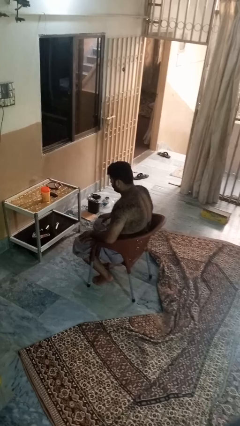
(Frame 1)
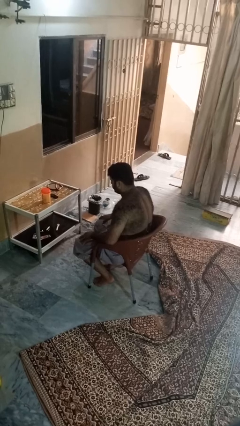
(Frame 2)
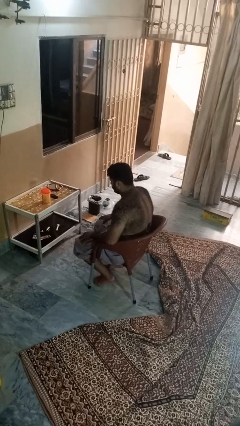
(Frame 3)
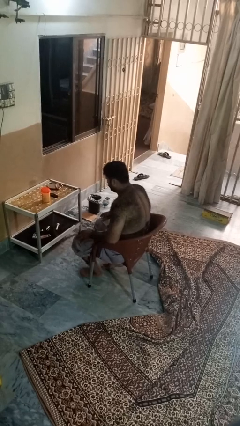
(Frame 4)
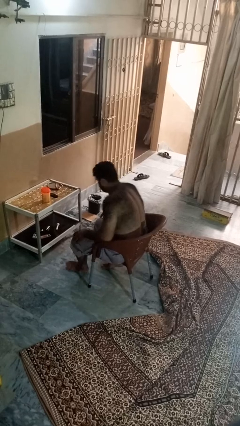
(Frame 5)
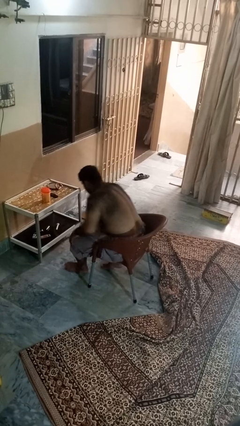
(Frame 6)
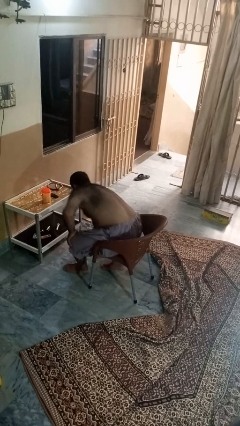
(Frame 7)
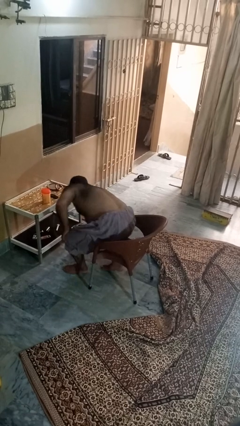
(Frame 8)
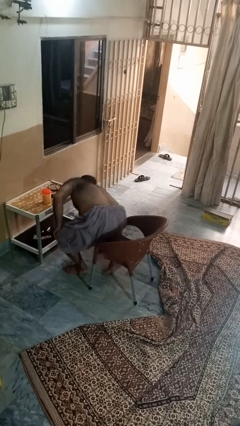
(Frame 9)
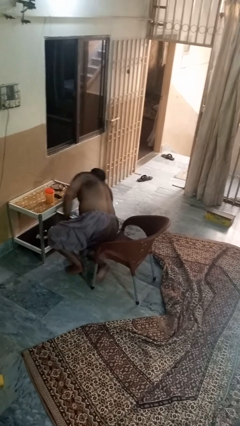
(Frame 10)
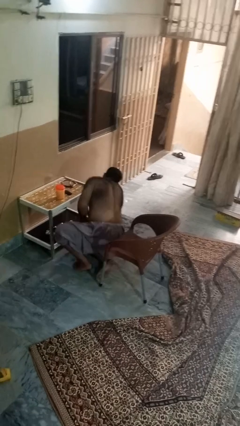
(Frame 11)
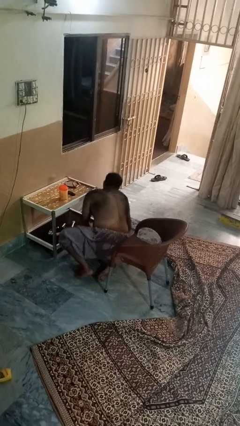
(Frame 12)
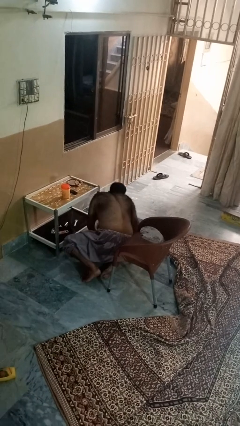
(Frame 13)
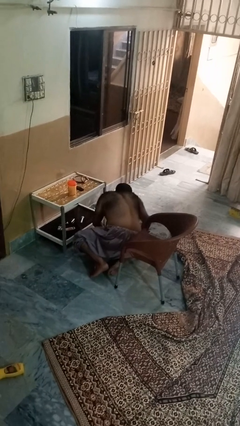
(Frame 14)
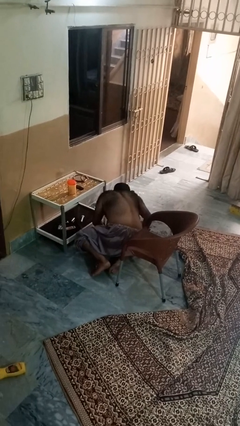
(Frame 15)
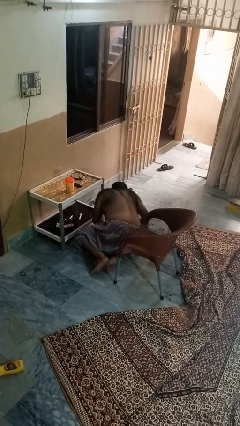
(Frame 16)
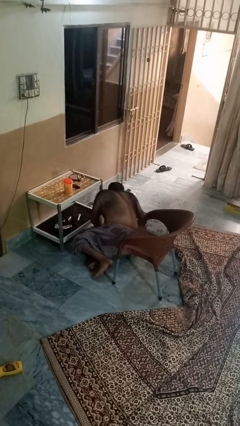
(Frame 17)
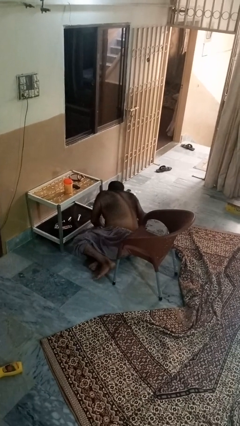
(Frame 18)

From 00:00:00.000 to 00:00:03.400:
person falls from chair

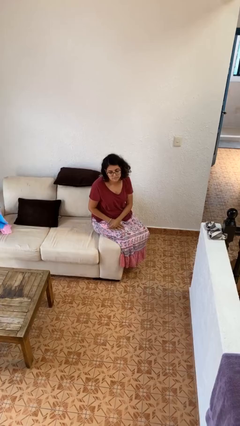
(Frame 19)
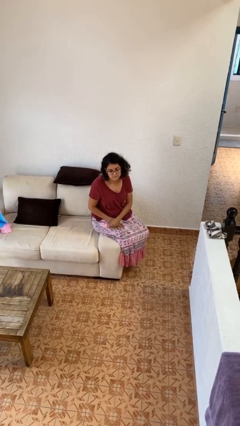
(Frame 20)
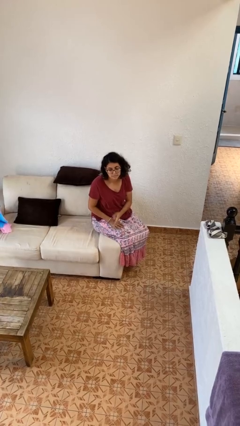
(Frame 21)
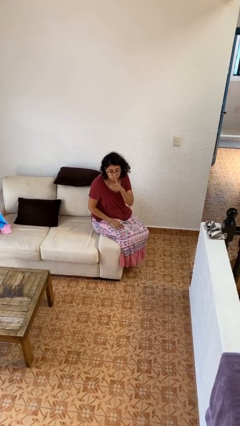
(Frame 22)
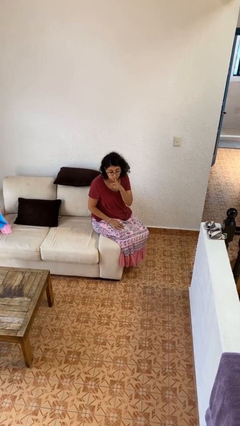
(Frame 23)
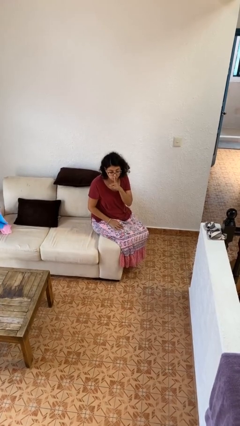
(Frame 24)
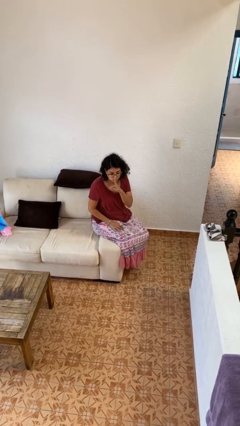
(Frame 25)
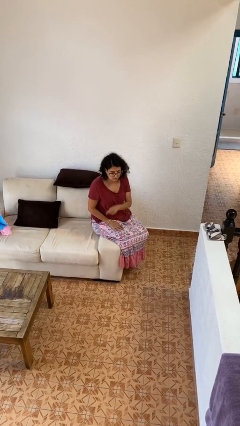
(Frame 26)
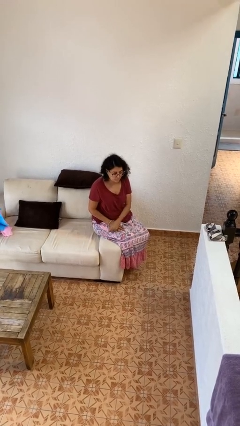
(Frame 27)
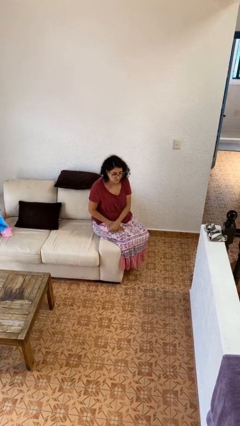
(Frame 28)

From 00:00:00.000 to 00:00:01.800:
person gestures be quiet

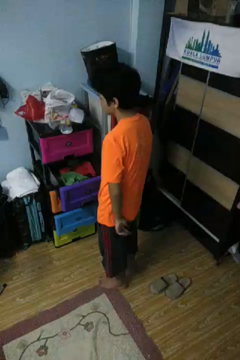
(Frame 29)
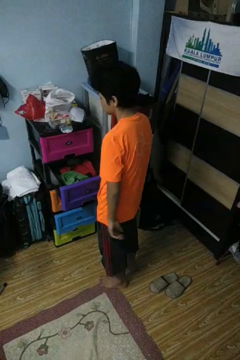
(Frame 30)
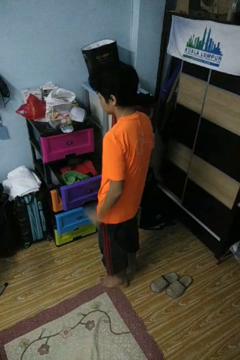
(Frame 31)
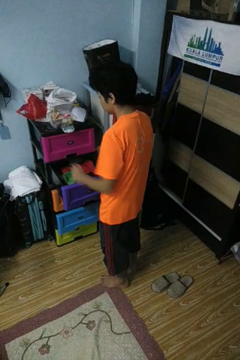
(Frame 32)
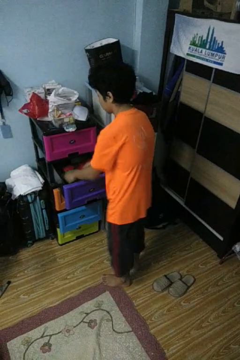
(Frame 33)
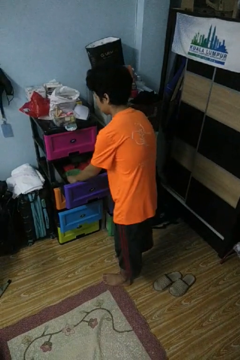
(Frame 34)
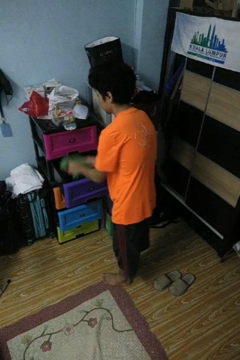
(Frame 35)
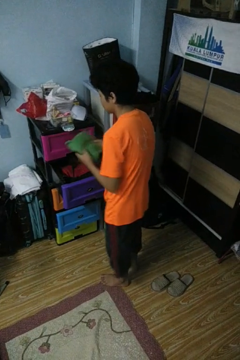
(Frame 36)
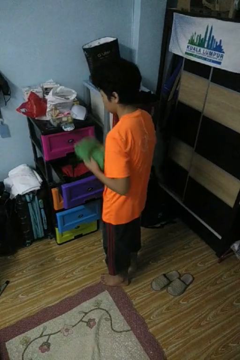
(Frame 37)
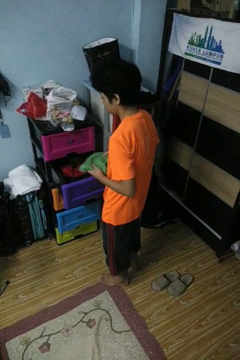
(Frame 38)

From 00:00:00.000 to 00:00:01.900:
person takes clothes from dresser

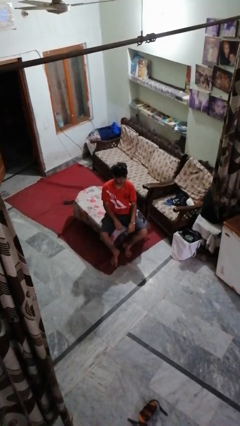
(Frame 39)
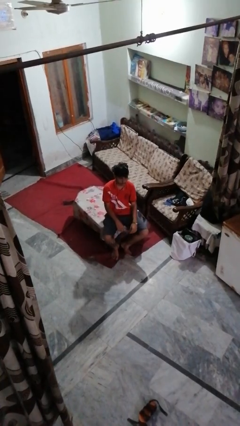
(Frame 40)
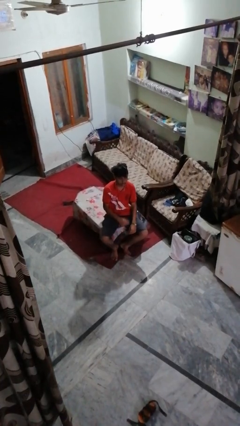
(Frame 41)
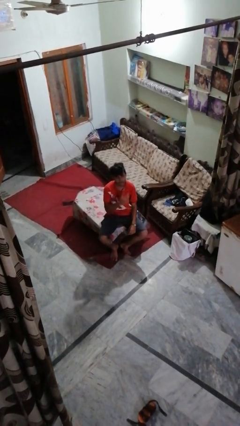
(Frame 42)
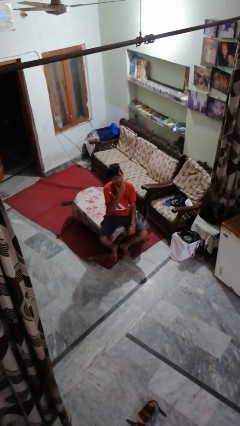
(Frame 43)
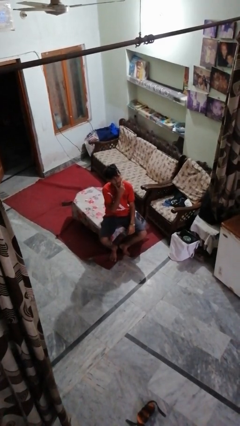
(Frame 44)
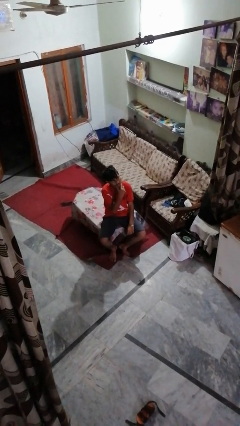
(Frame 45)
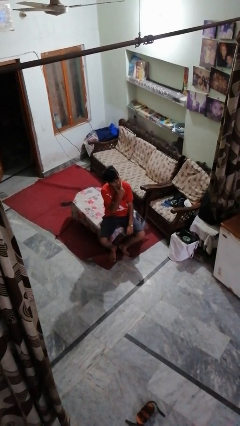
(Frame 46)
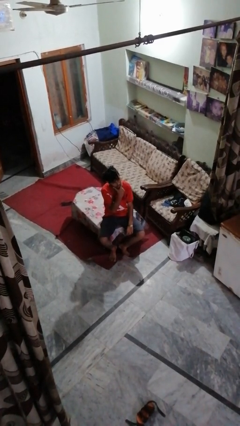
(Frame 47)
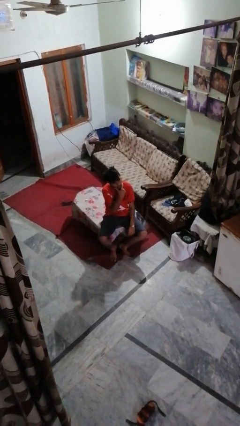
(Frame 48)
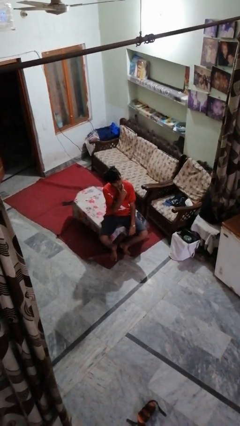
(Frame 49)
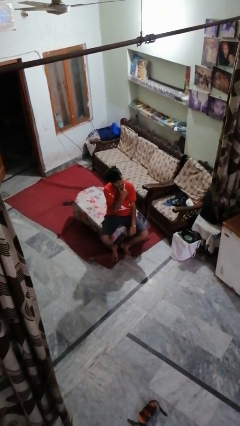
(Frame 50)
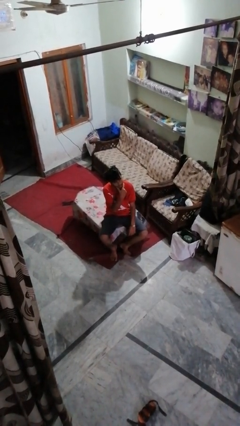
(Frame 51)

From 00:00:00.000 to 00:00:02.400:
person strokes chin

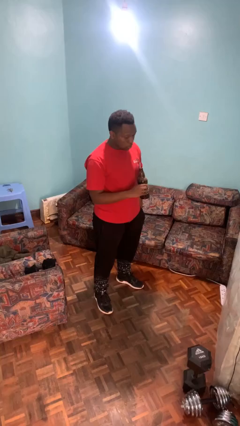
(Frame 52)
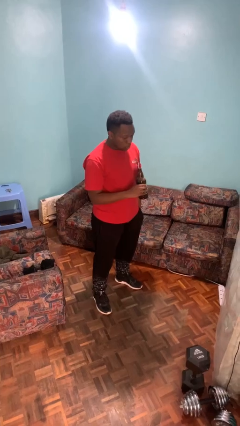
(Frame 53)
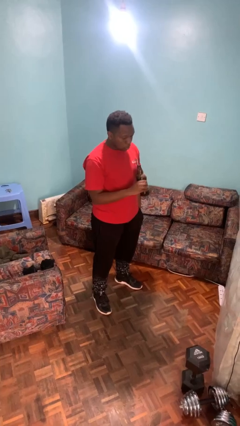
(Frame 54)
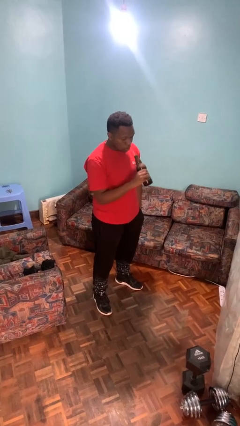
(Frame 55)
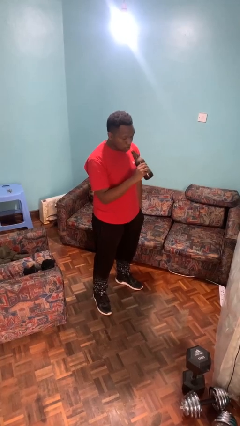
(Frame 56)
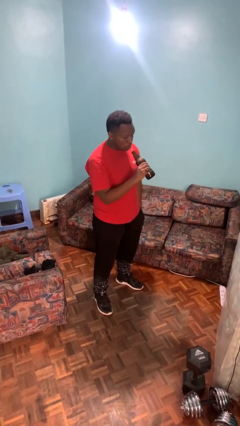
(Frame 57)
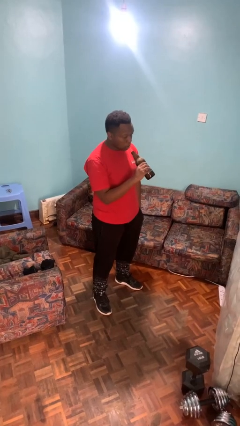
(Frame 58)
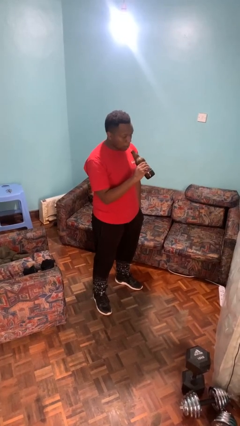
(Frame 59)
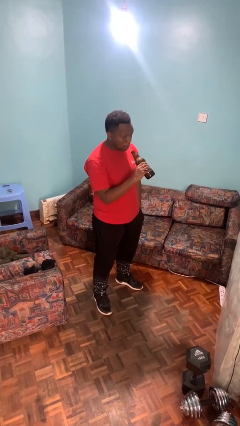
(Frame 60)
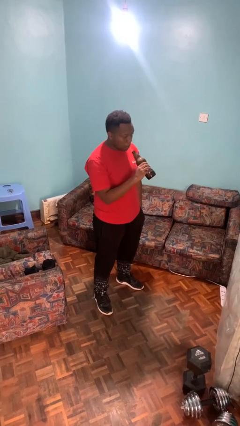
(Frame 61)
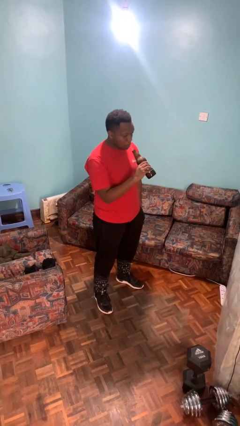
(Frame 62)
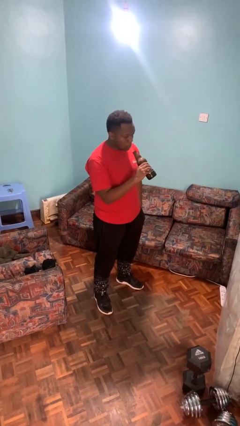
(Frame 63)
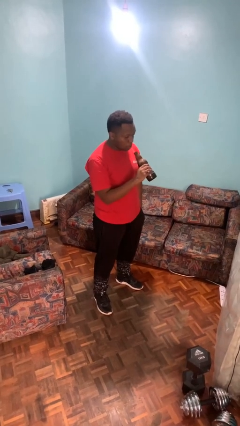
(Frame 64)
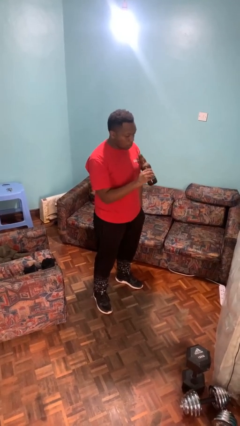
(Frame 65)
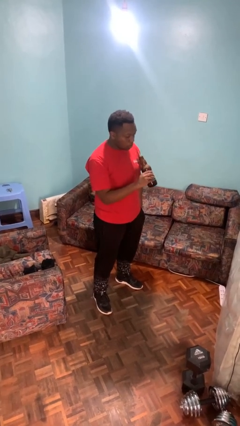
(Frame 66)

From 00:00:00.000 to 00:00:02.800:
person drinks from straw

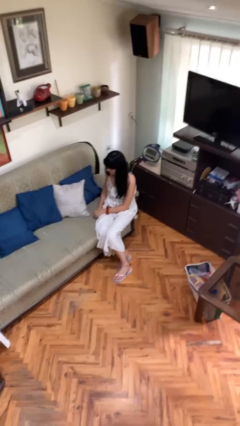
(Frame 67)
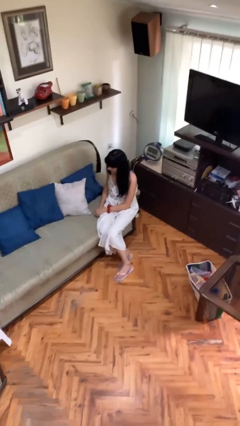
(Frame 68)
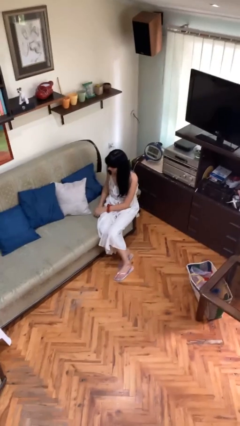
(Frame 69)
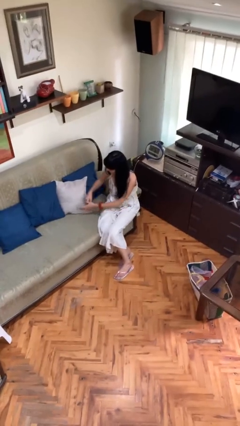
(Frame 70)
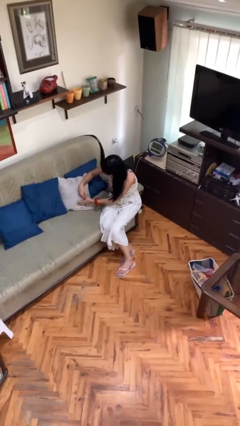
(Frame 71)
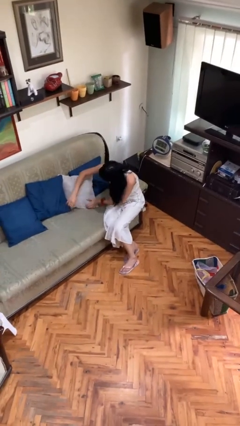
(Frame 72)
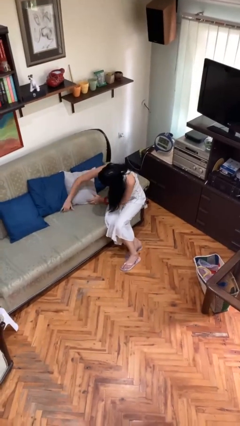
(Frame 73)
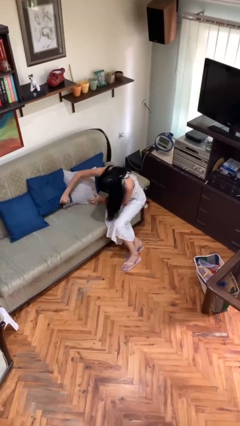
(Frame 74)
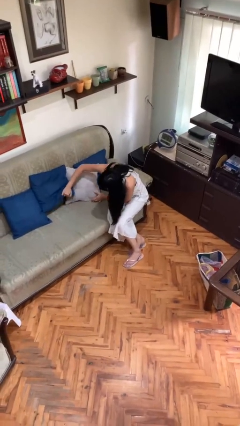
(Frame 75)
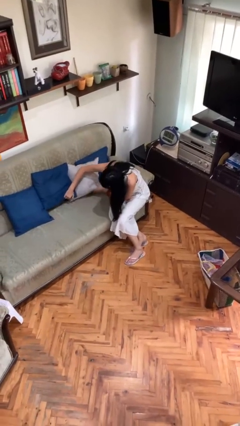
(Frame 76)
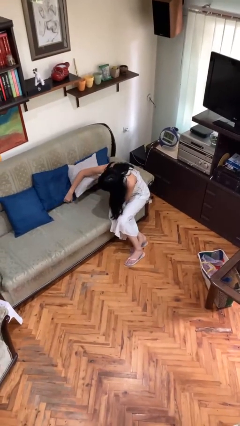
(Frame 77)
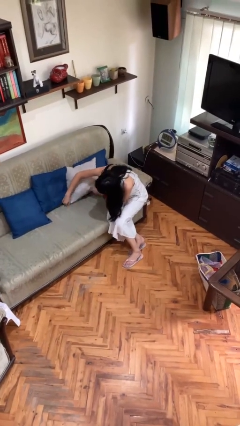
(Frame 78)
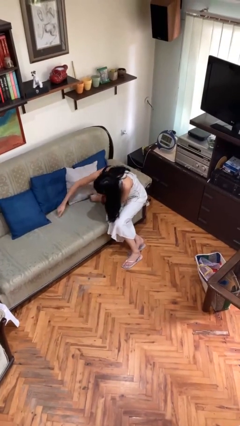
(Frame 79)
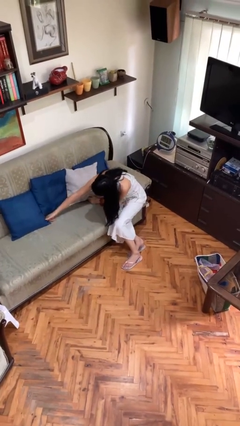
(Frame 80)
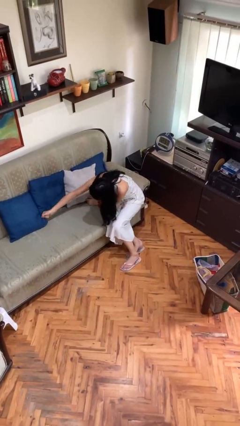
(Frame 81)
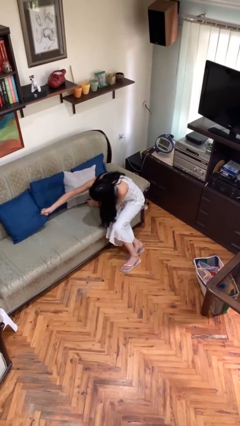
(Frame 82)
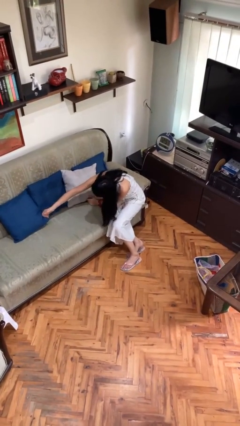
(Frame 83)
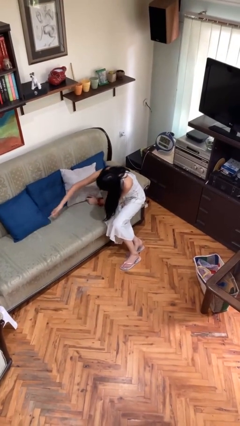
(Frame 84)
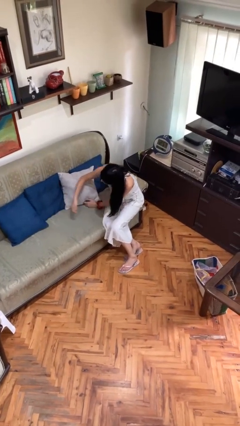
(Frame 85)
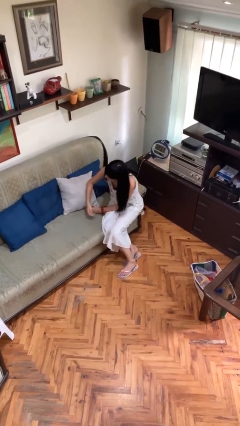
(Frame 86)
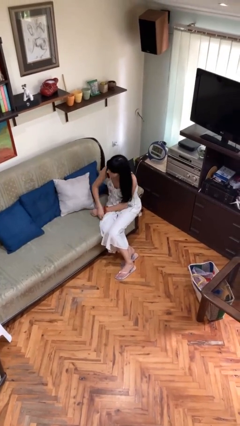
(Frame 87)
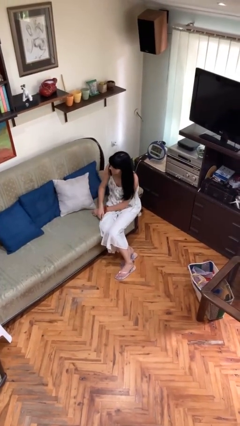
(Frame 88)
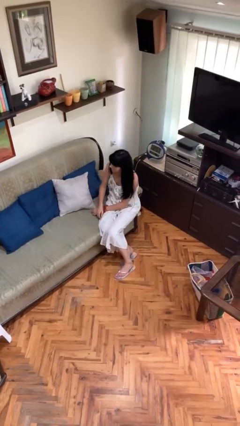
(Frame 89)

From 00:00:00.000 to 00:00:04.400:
person searches in couch

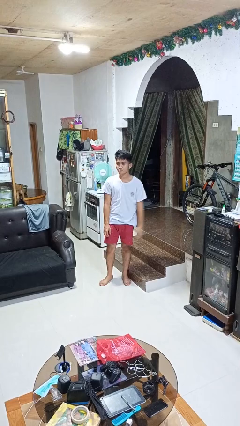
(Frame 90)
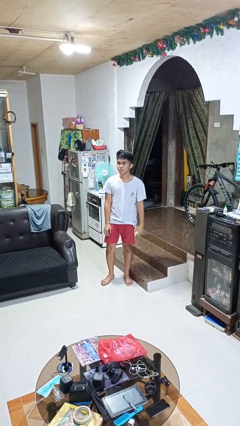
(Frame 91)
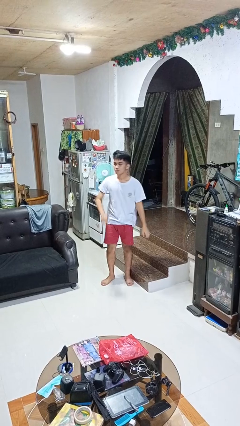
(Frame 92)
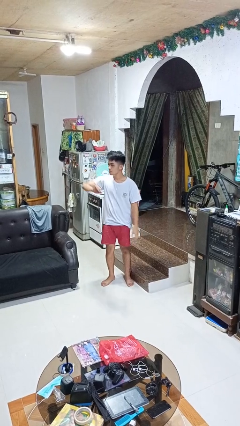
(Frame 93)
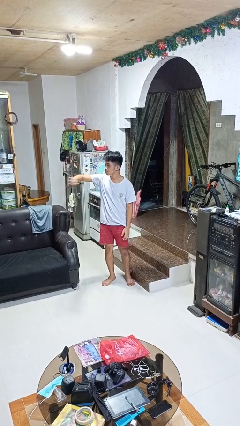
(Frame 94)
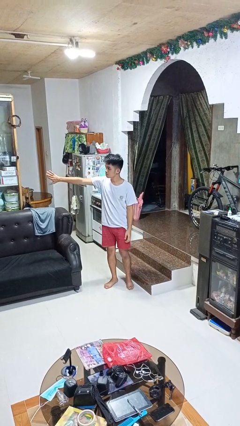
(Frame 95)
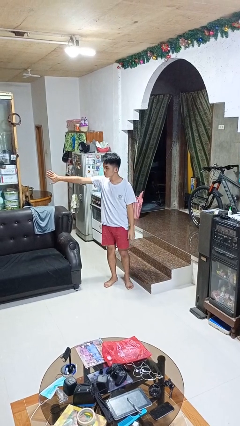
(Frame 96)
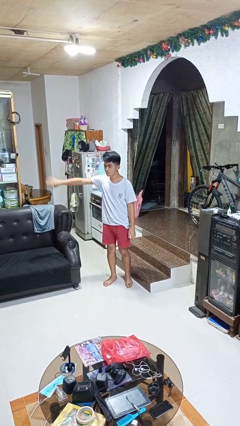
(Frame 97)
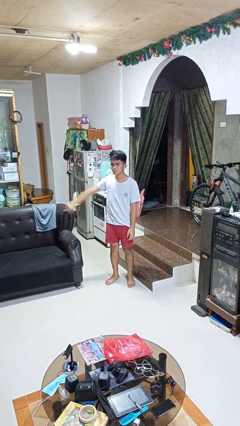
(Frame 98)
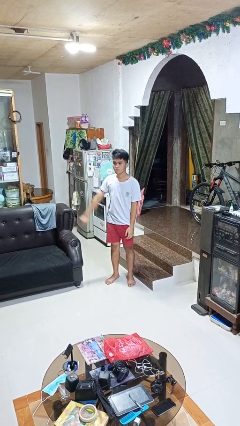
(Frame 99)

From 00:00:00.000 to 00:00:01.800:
person gestures swipe right
